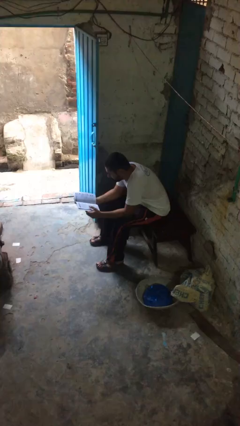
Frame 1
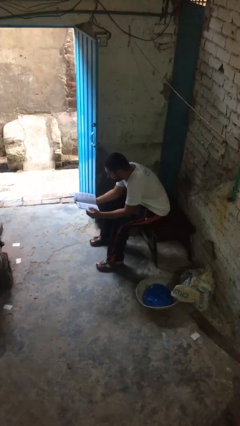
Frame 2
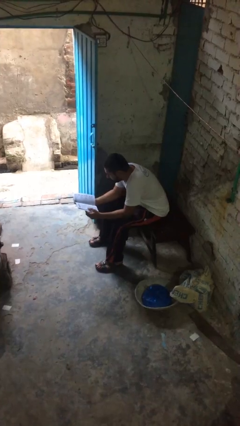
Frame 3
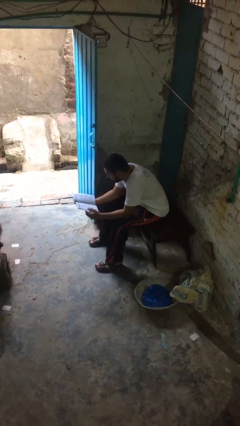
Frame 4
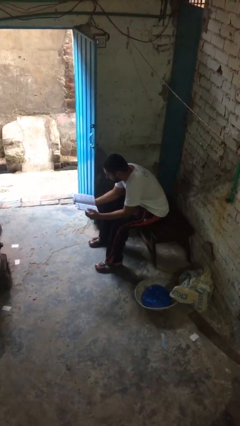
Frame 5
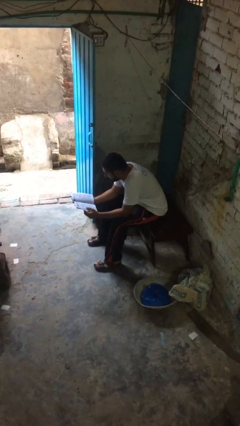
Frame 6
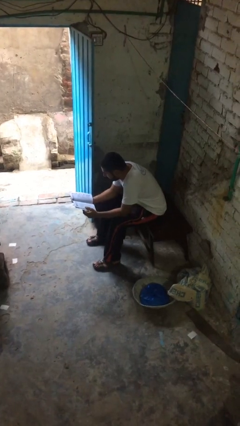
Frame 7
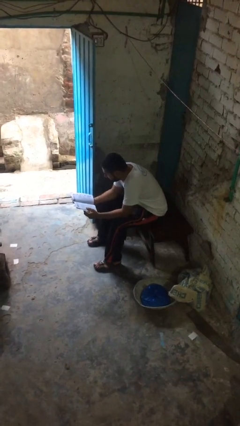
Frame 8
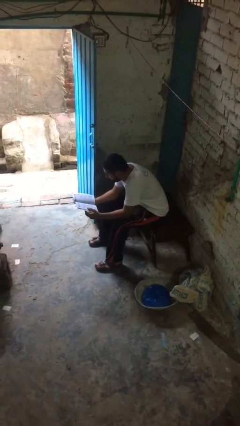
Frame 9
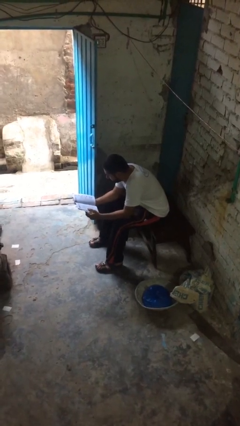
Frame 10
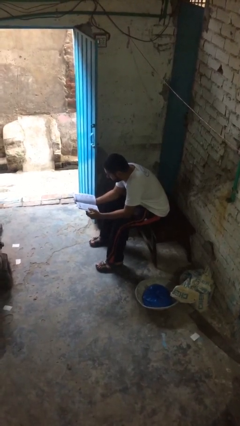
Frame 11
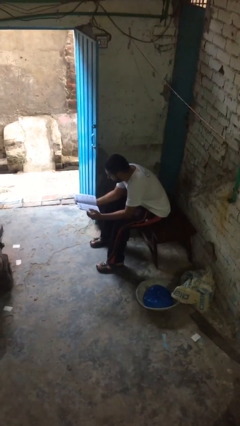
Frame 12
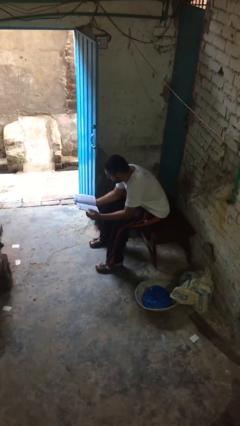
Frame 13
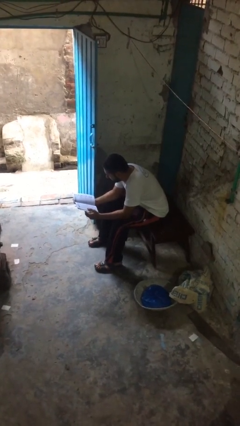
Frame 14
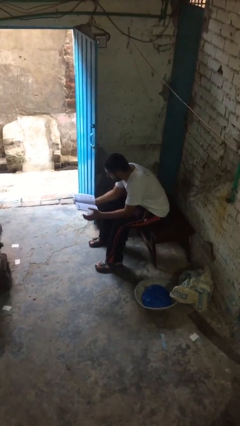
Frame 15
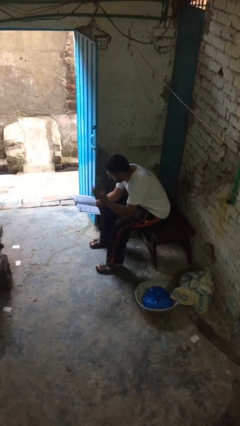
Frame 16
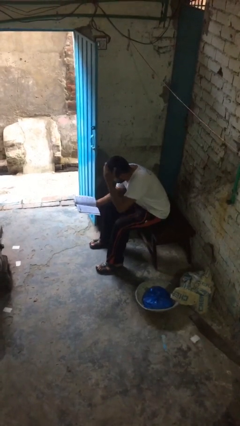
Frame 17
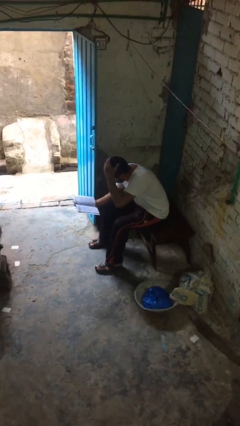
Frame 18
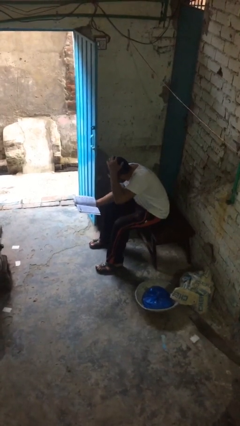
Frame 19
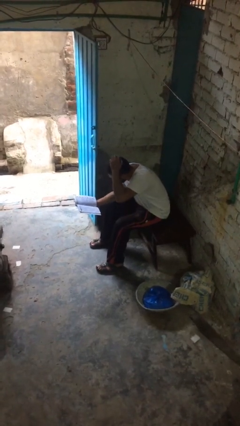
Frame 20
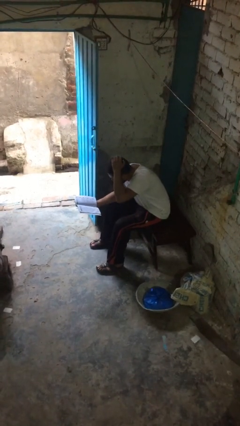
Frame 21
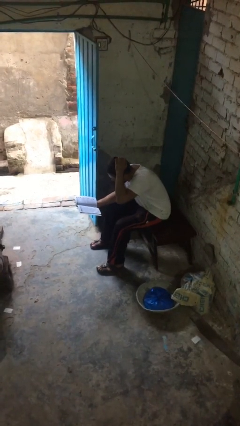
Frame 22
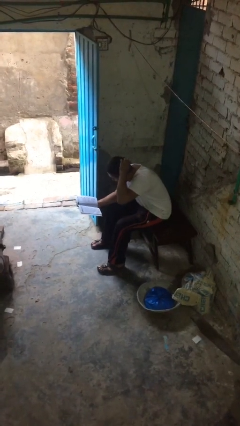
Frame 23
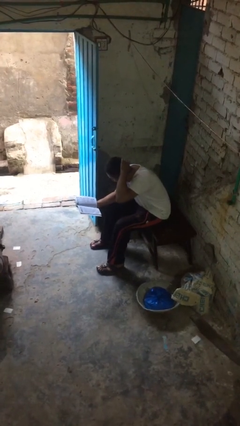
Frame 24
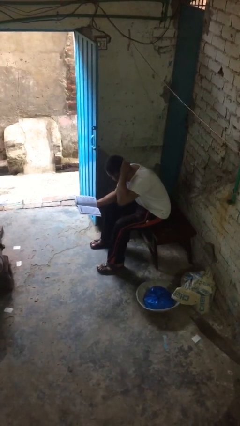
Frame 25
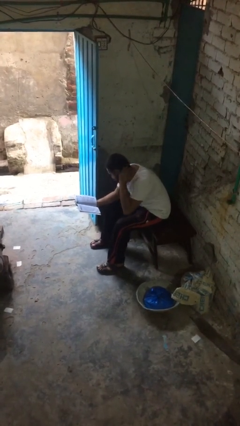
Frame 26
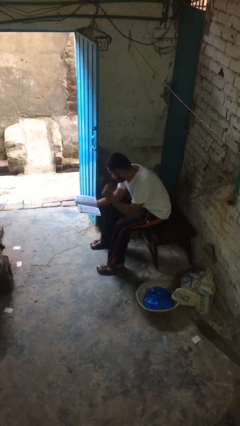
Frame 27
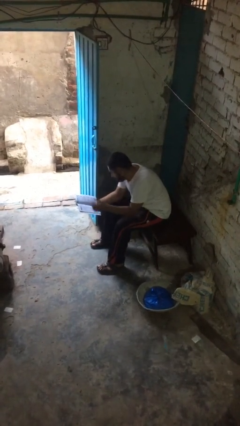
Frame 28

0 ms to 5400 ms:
person reads document

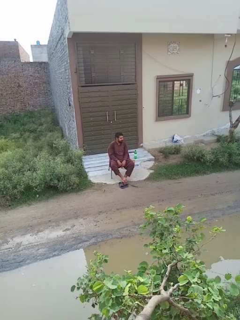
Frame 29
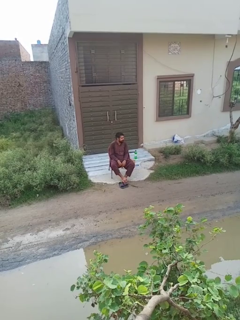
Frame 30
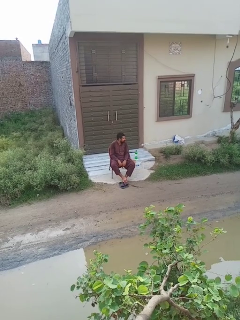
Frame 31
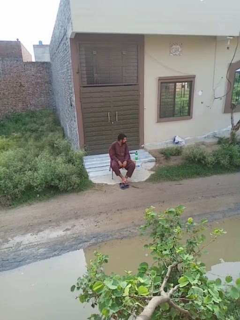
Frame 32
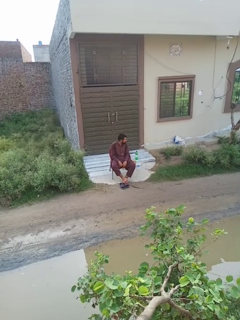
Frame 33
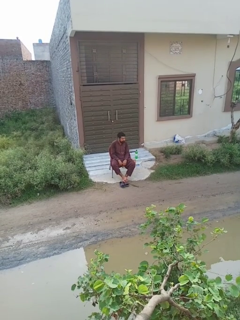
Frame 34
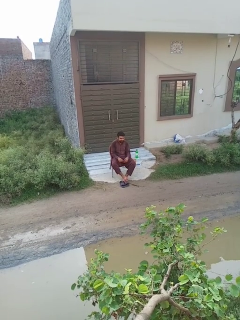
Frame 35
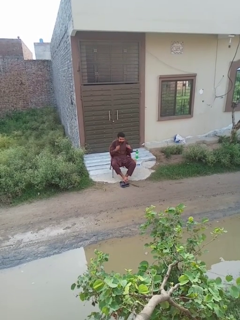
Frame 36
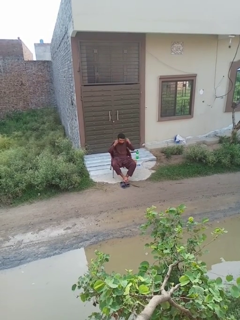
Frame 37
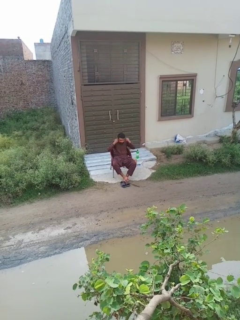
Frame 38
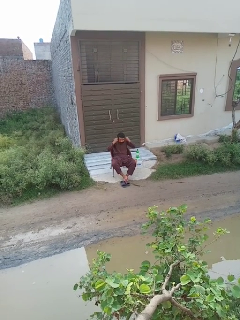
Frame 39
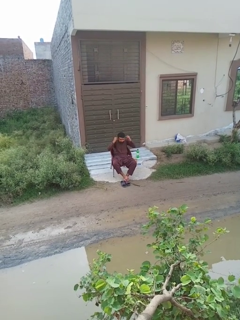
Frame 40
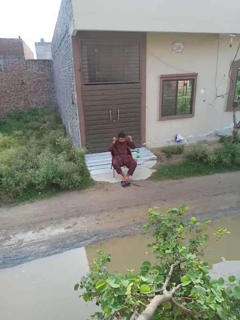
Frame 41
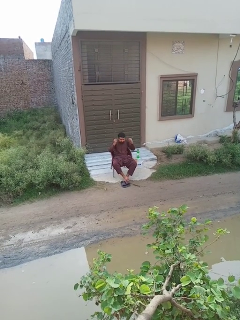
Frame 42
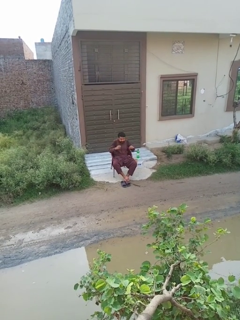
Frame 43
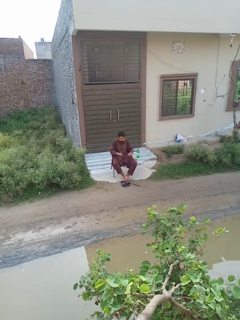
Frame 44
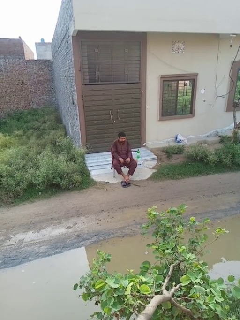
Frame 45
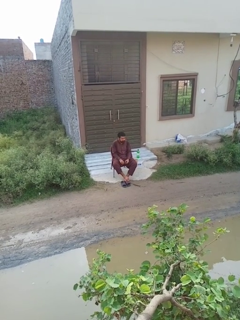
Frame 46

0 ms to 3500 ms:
person takes off earrings

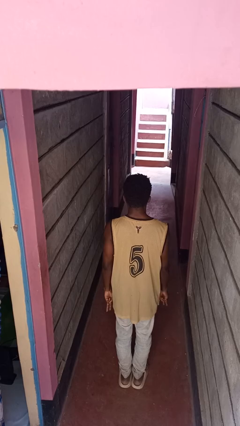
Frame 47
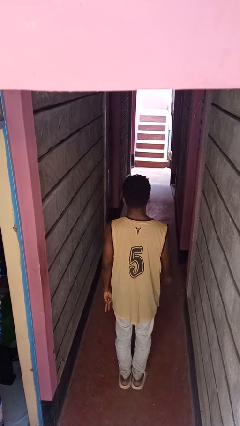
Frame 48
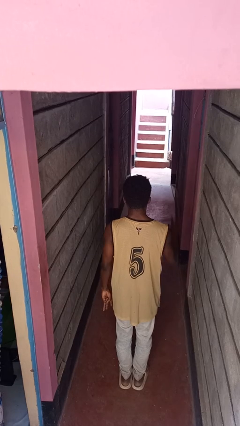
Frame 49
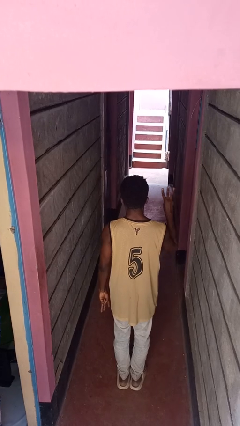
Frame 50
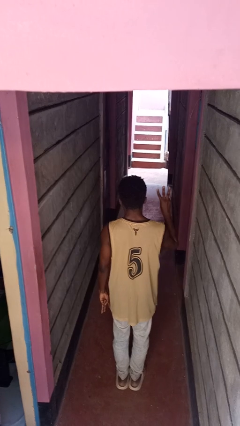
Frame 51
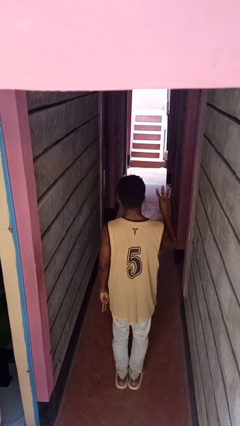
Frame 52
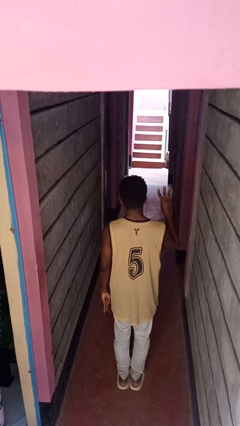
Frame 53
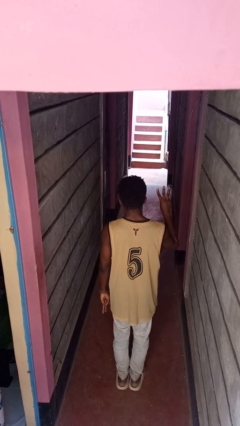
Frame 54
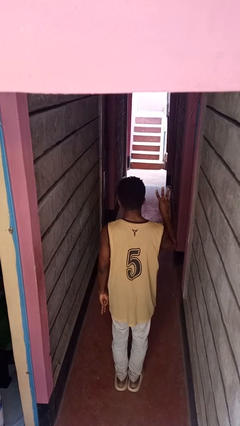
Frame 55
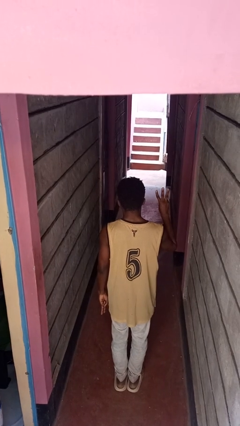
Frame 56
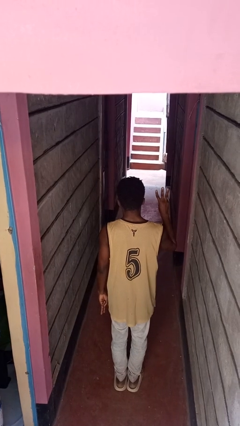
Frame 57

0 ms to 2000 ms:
person gestures number three

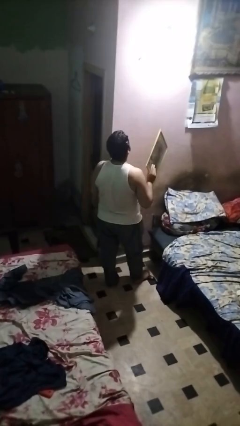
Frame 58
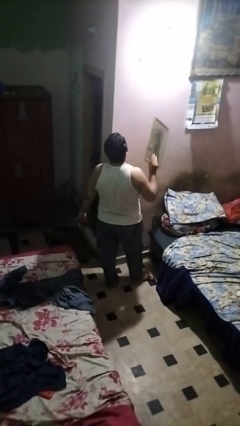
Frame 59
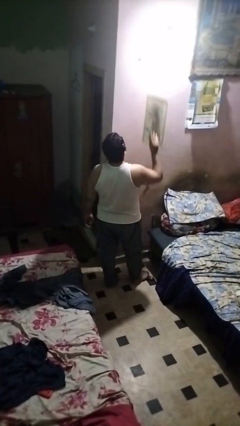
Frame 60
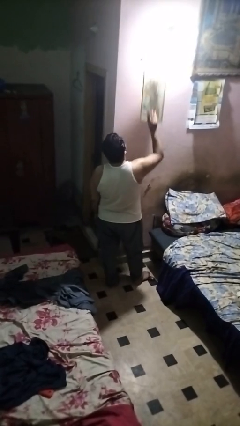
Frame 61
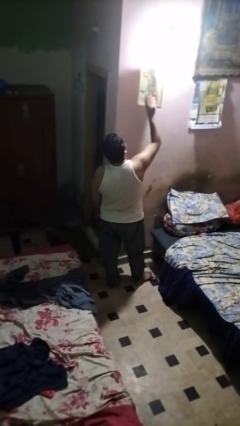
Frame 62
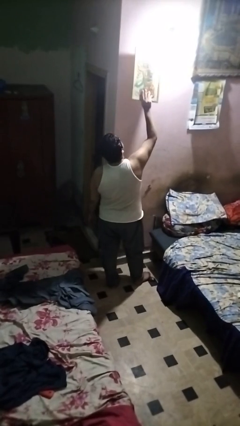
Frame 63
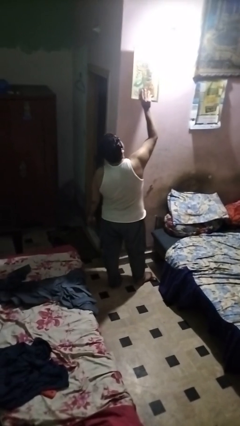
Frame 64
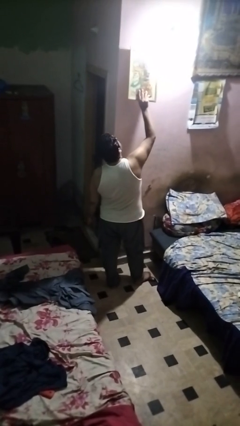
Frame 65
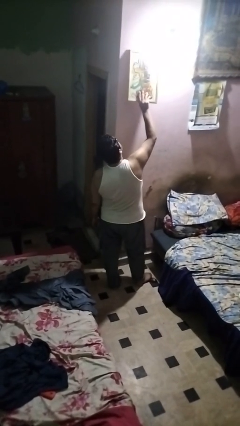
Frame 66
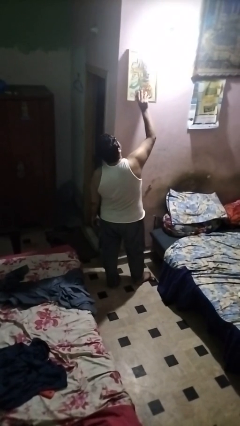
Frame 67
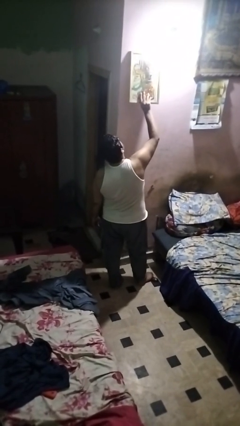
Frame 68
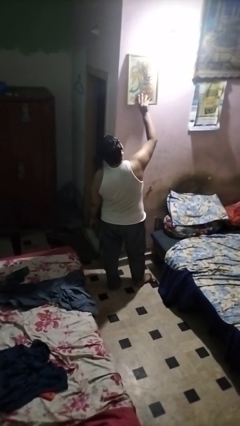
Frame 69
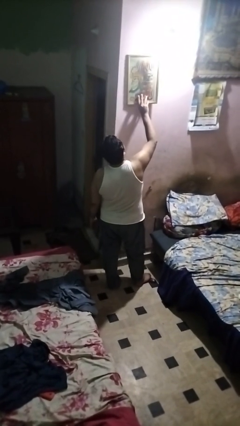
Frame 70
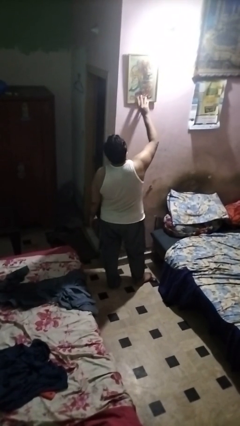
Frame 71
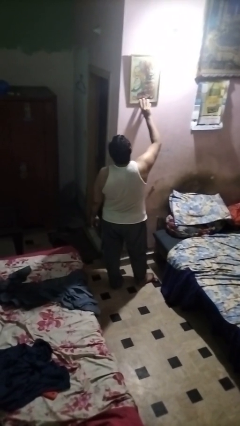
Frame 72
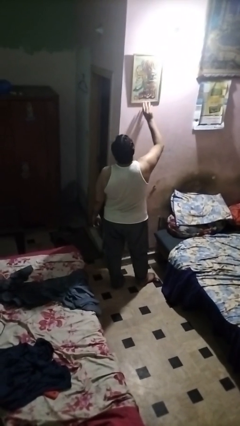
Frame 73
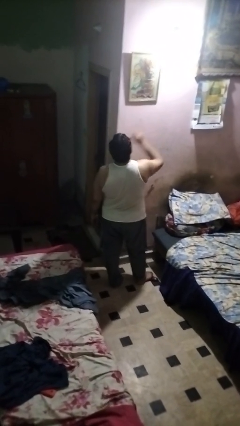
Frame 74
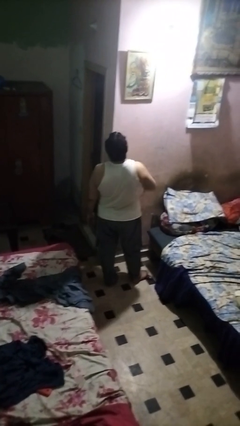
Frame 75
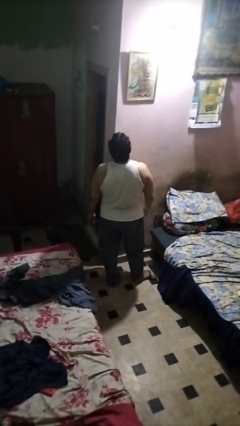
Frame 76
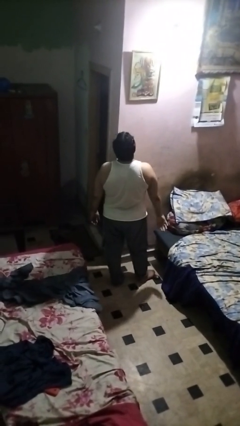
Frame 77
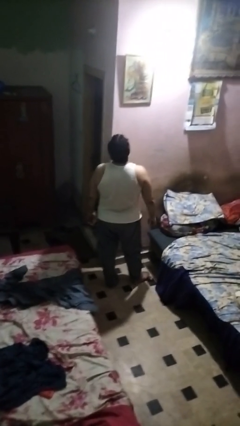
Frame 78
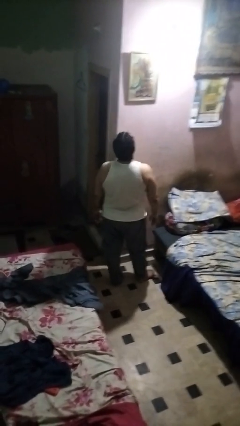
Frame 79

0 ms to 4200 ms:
person puts up picture frame

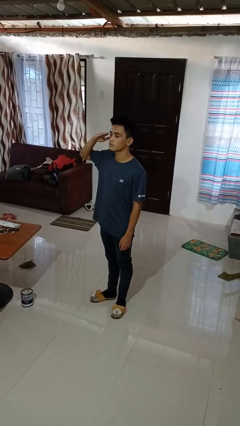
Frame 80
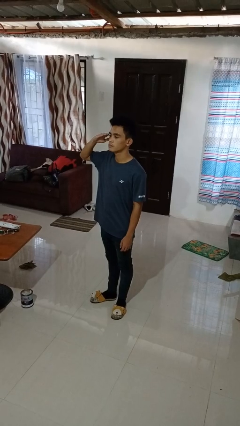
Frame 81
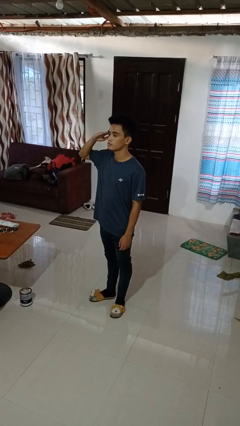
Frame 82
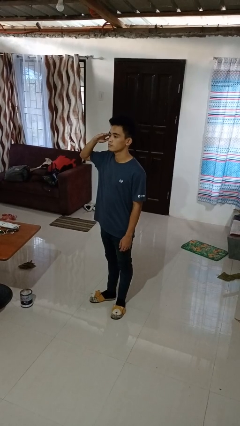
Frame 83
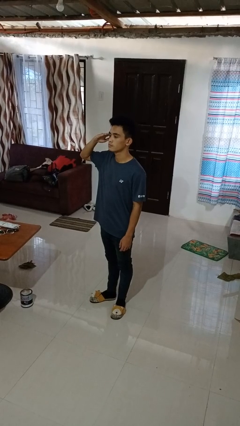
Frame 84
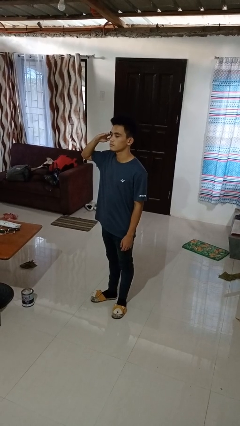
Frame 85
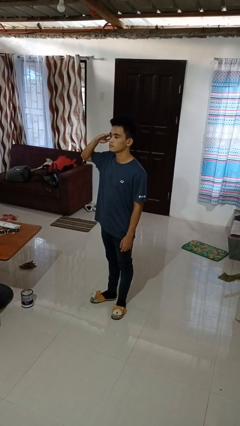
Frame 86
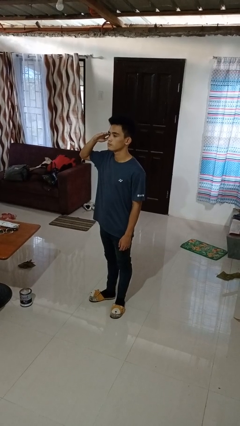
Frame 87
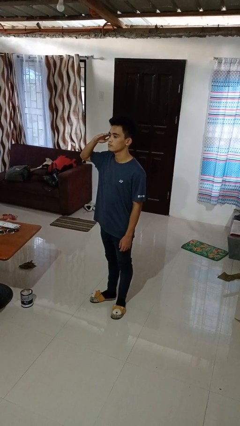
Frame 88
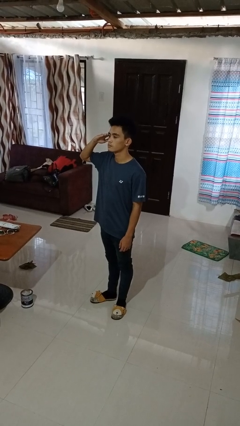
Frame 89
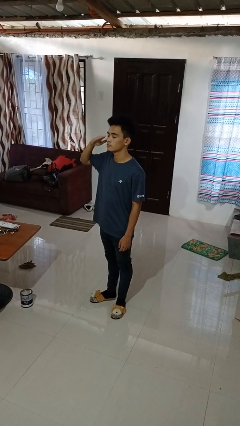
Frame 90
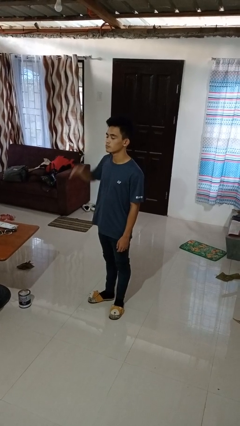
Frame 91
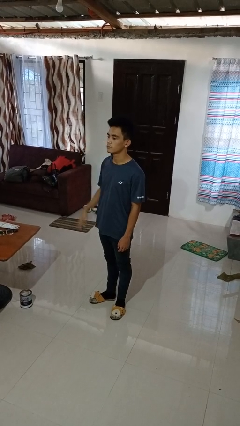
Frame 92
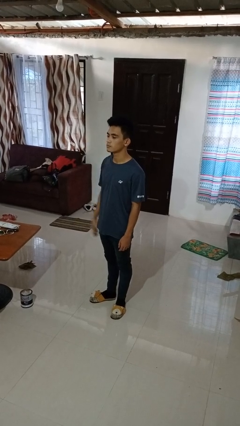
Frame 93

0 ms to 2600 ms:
person salutes

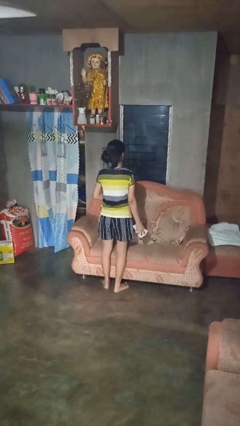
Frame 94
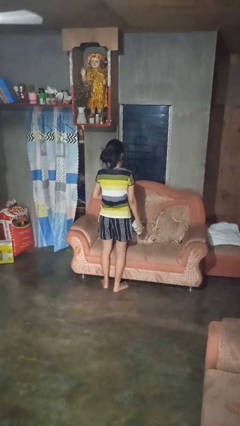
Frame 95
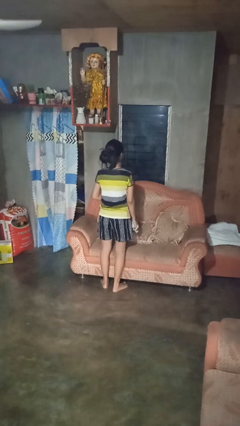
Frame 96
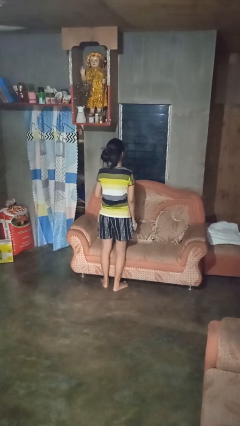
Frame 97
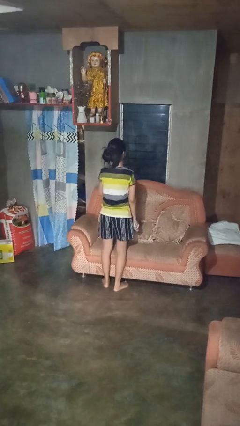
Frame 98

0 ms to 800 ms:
person sprays from bottle
